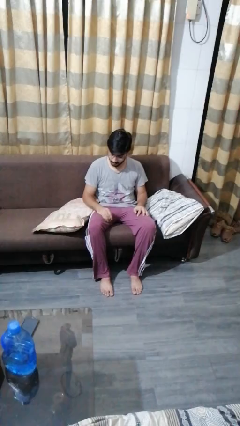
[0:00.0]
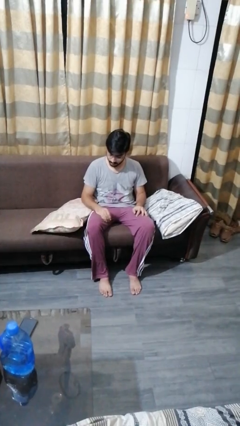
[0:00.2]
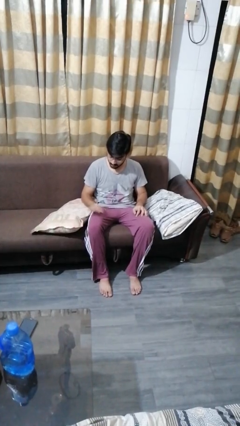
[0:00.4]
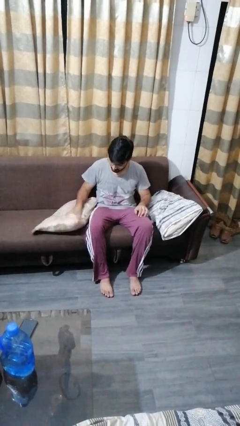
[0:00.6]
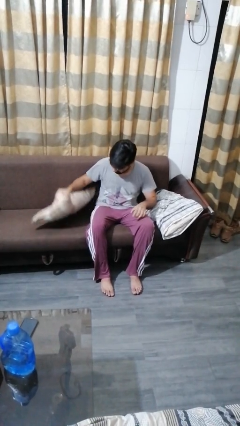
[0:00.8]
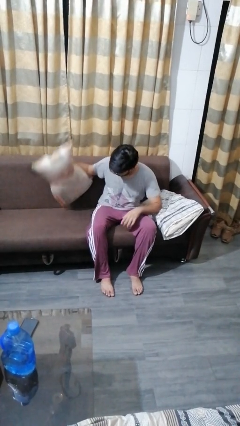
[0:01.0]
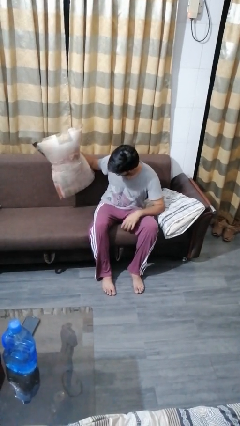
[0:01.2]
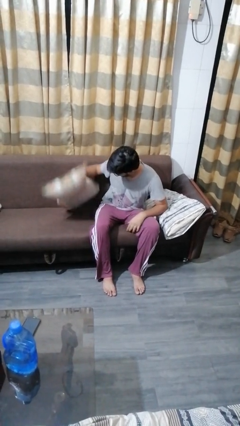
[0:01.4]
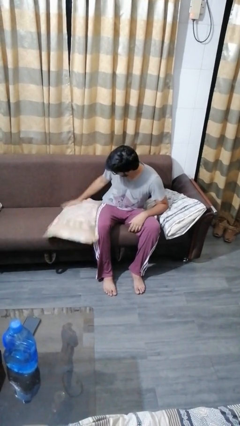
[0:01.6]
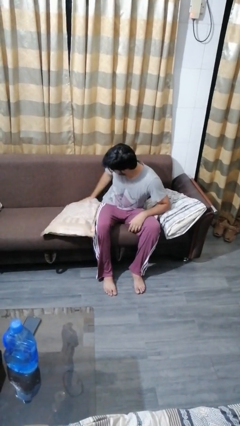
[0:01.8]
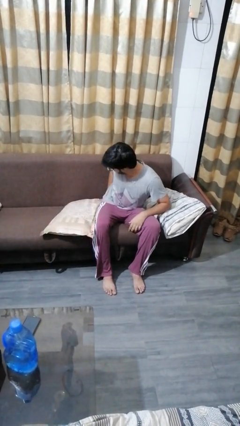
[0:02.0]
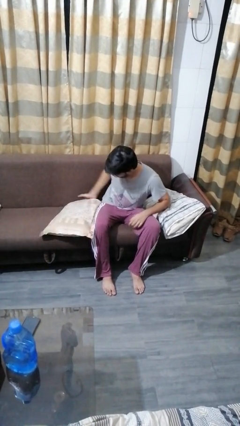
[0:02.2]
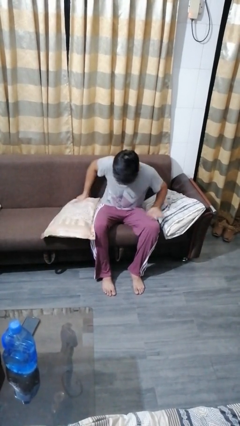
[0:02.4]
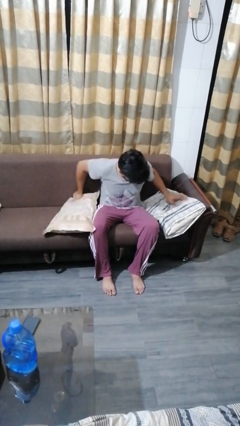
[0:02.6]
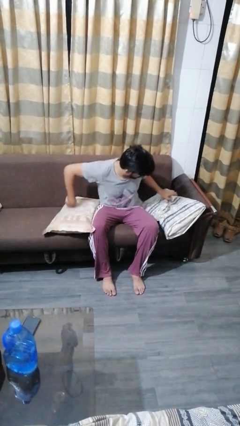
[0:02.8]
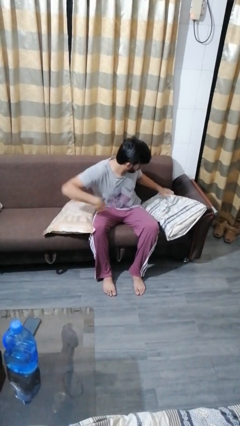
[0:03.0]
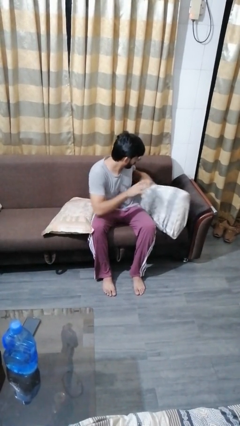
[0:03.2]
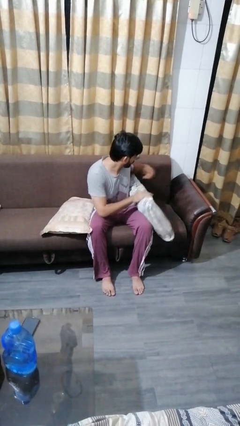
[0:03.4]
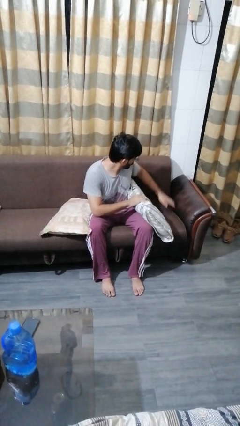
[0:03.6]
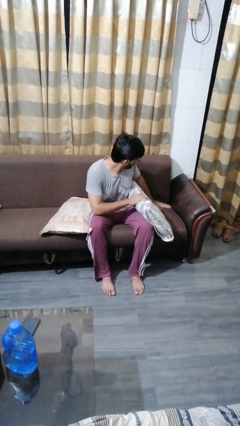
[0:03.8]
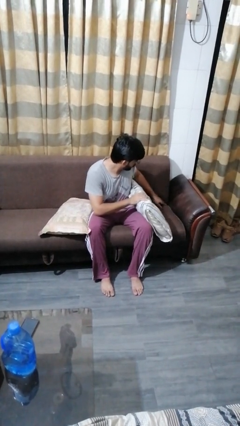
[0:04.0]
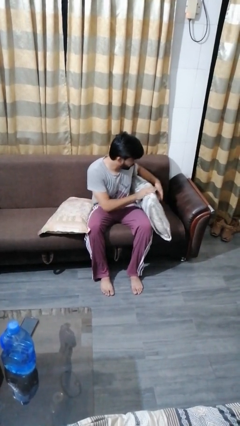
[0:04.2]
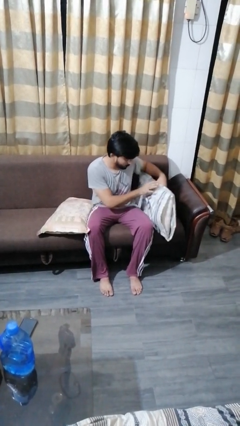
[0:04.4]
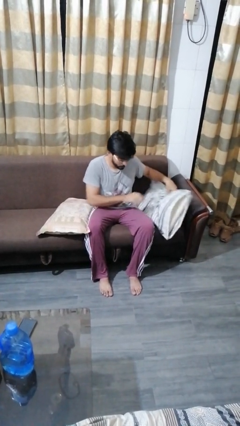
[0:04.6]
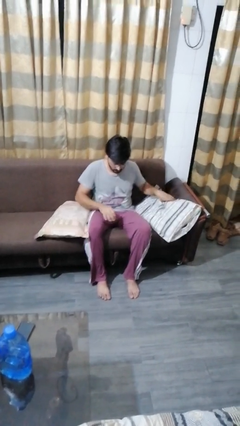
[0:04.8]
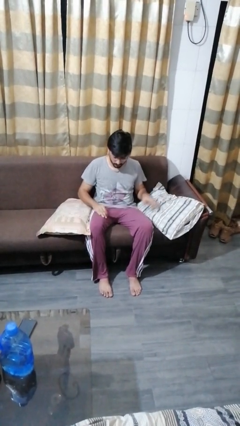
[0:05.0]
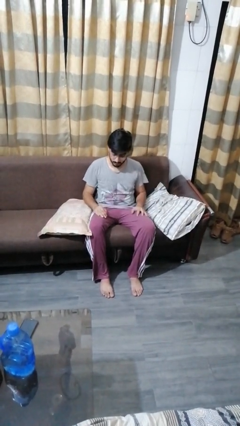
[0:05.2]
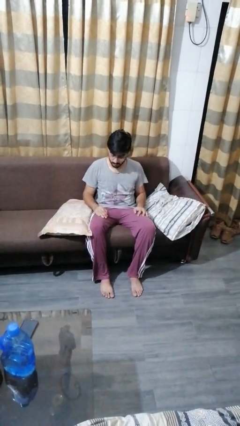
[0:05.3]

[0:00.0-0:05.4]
person searches in couch

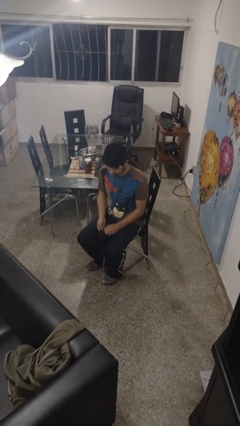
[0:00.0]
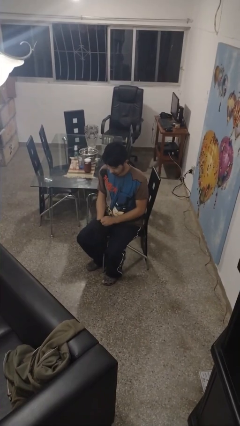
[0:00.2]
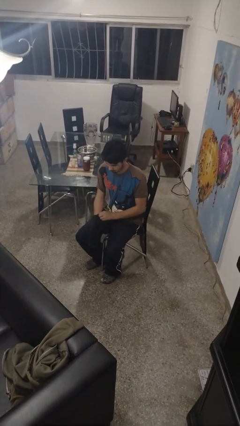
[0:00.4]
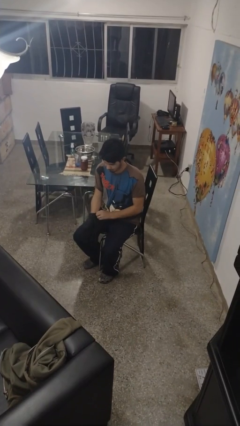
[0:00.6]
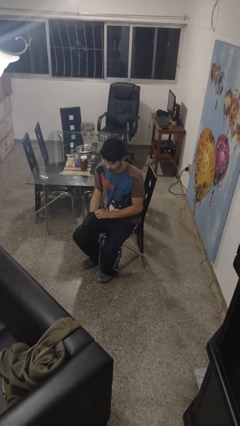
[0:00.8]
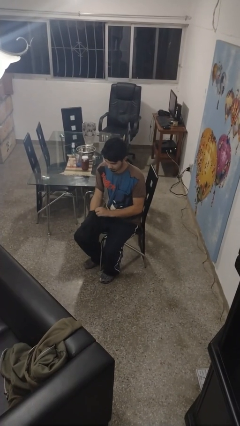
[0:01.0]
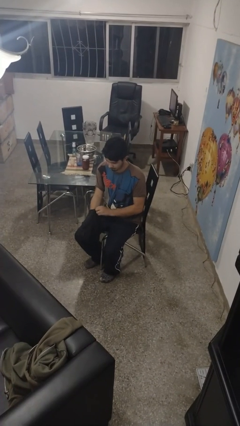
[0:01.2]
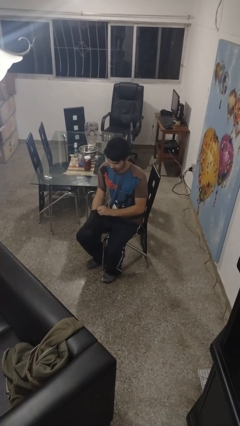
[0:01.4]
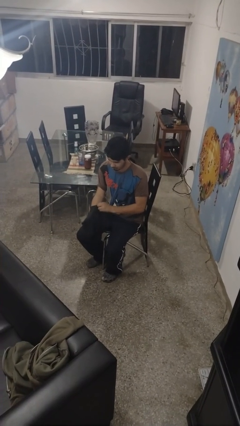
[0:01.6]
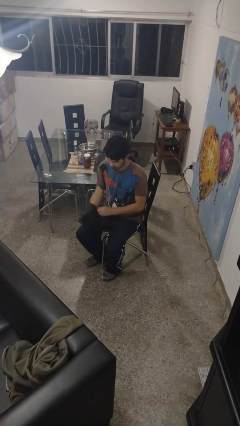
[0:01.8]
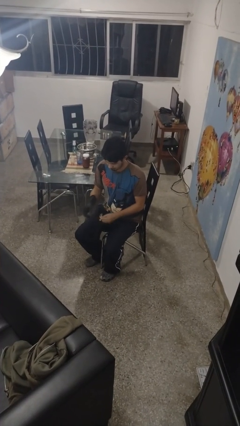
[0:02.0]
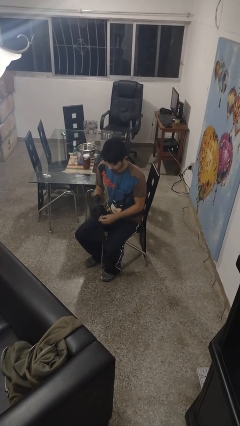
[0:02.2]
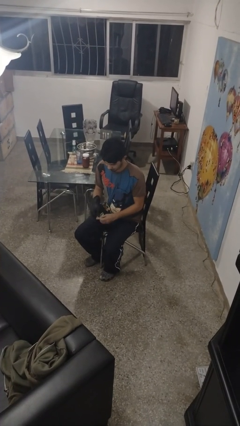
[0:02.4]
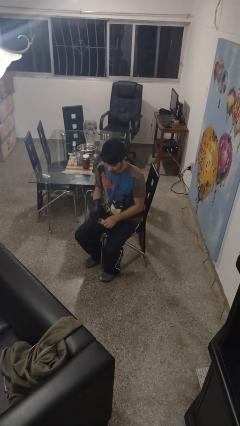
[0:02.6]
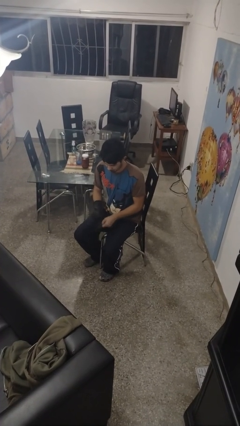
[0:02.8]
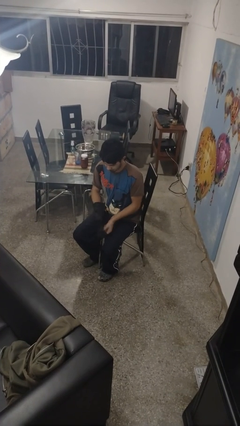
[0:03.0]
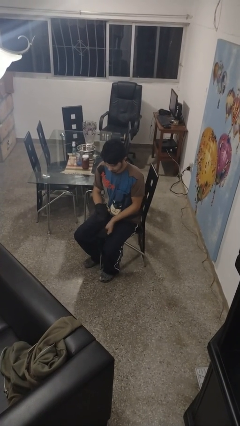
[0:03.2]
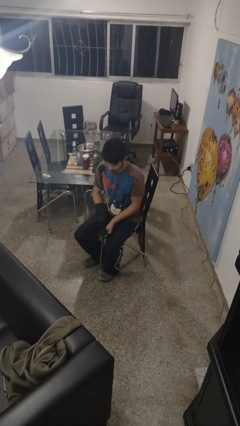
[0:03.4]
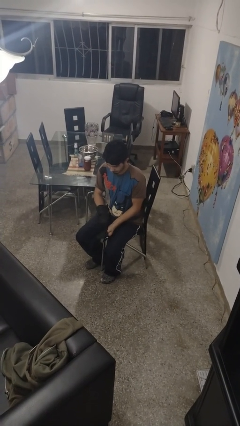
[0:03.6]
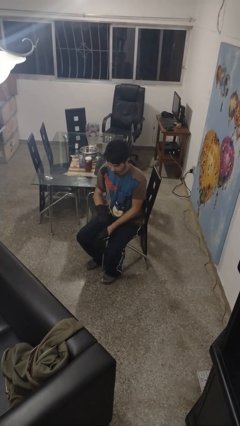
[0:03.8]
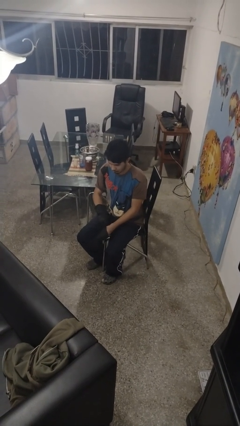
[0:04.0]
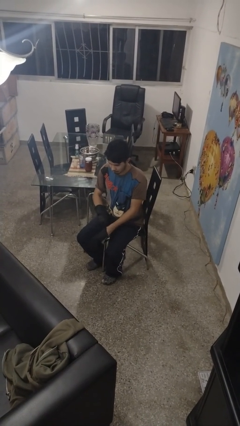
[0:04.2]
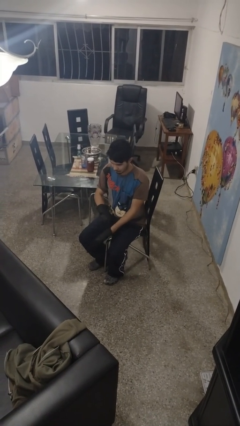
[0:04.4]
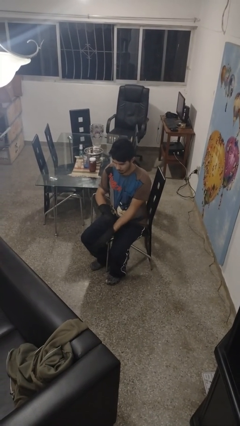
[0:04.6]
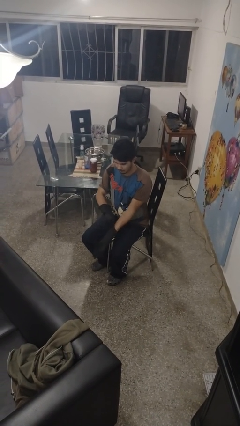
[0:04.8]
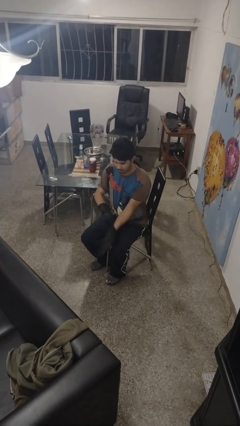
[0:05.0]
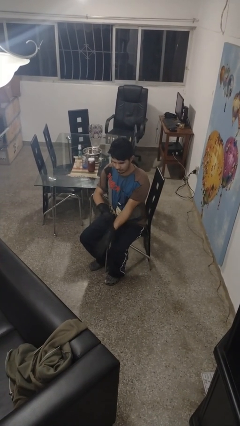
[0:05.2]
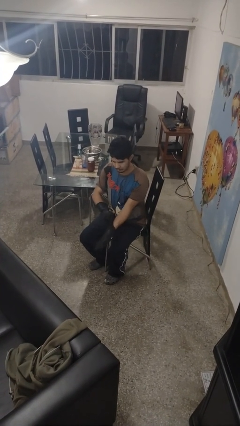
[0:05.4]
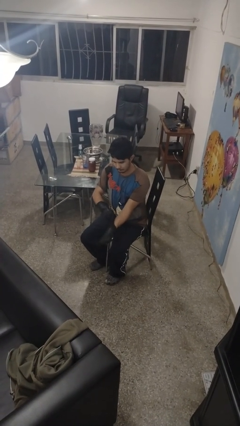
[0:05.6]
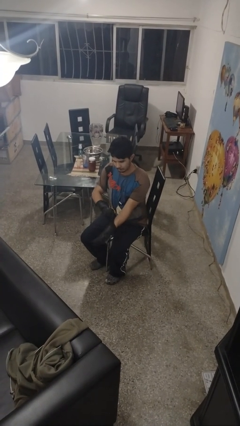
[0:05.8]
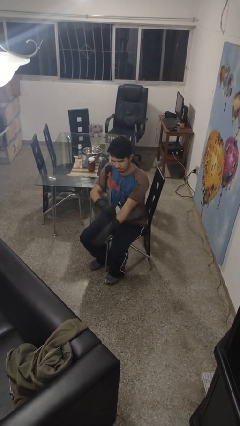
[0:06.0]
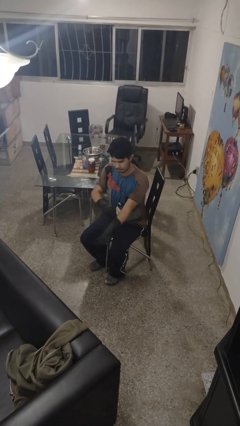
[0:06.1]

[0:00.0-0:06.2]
person puts on gloves

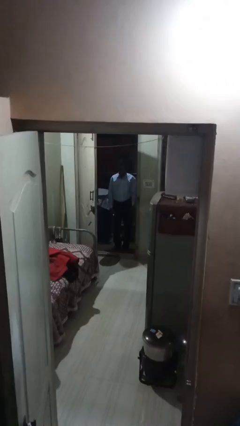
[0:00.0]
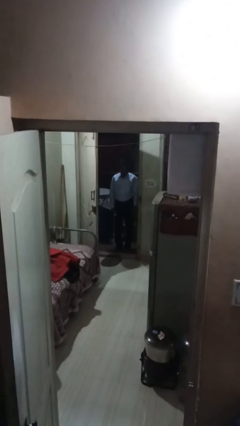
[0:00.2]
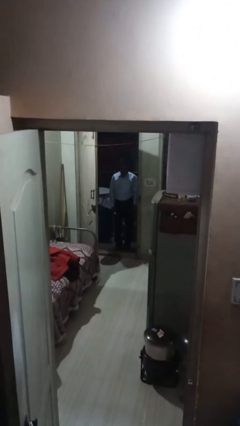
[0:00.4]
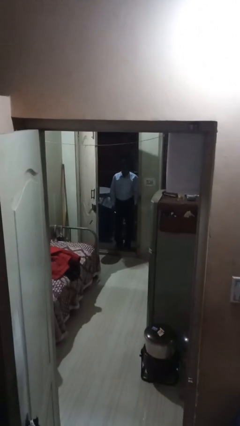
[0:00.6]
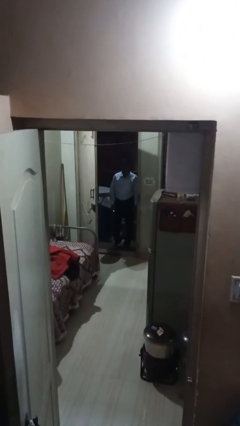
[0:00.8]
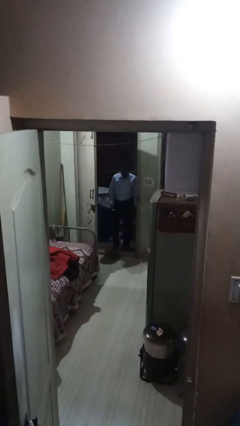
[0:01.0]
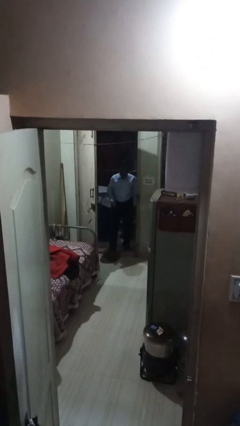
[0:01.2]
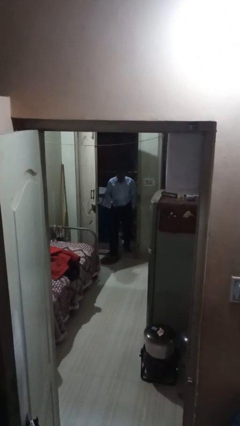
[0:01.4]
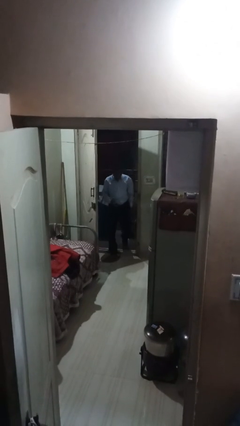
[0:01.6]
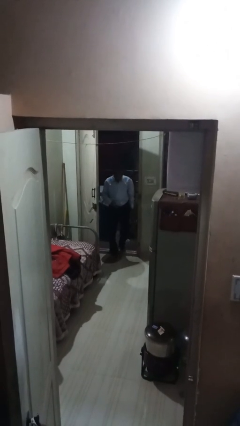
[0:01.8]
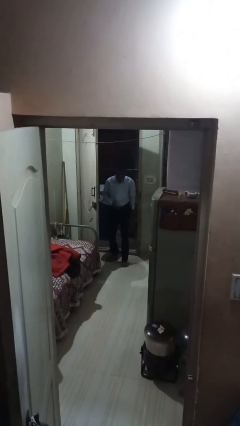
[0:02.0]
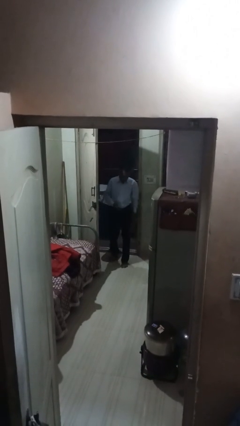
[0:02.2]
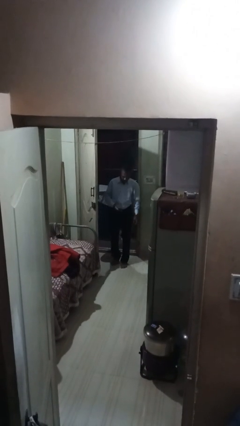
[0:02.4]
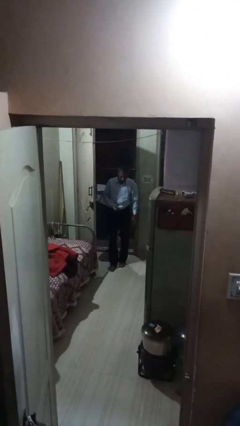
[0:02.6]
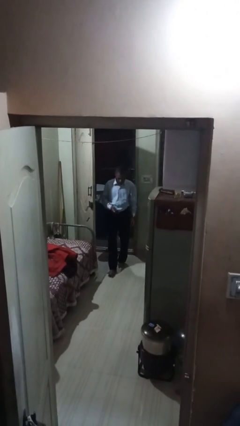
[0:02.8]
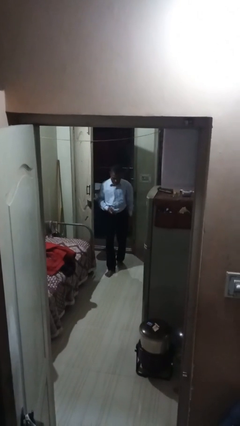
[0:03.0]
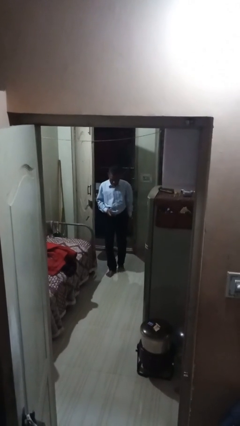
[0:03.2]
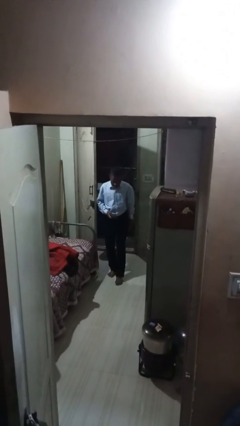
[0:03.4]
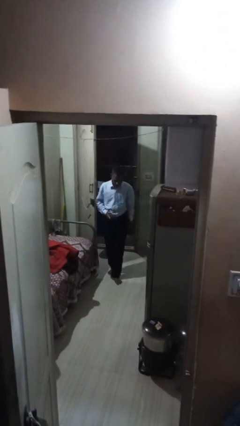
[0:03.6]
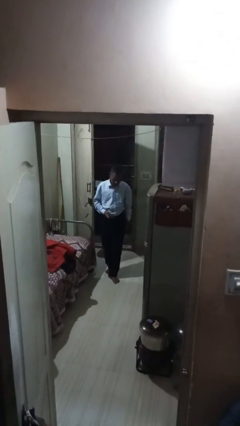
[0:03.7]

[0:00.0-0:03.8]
person enters scene through structure

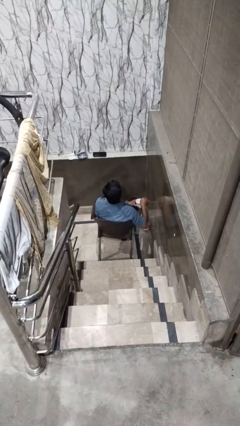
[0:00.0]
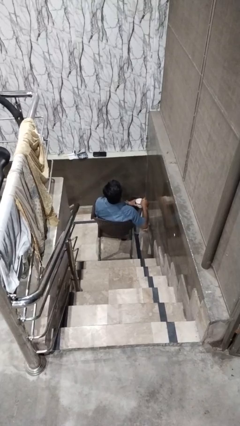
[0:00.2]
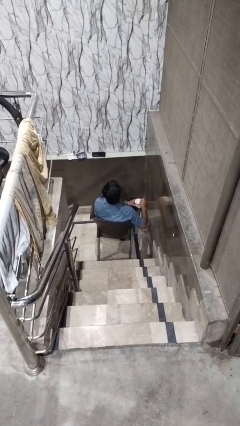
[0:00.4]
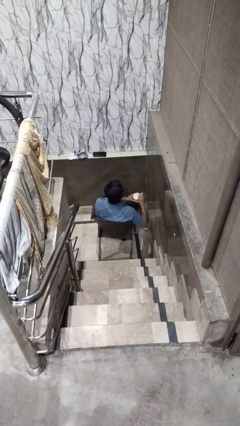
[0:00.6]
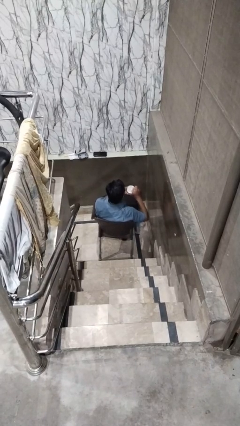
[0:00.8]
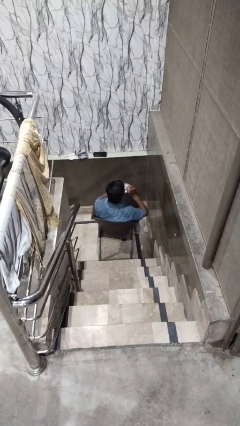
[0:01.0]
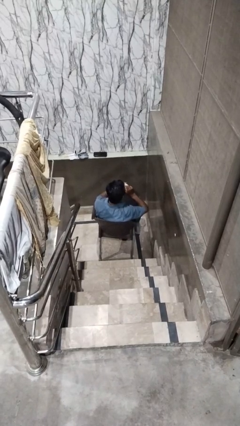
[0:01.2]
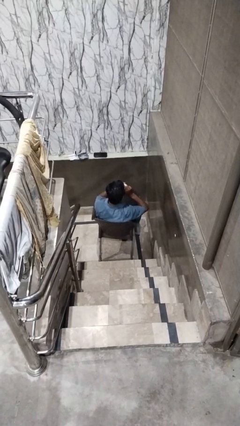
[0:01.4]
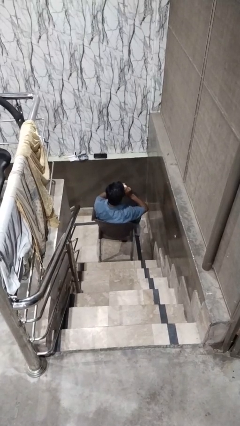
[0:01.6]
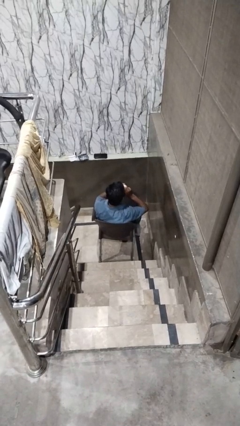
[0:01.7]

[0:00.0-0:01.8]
person drinks from mug

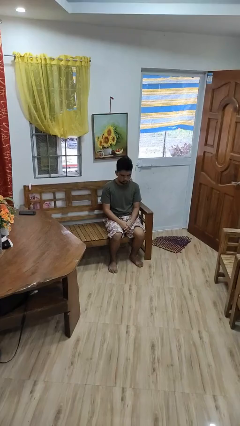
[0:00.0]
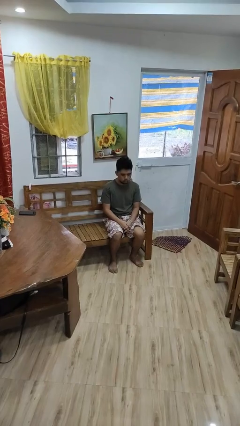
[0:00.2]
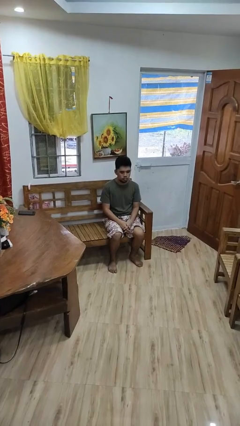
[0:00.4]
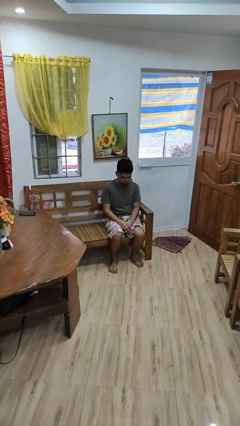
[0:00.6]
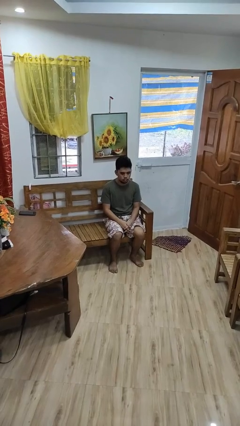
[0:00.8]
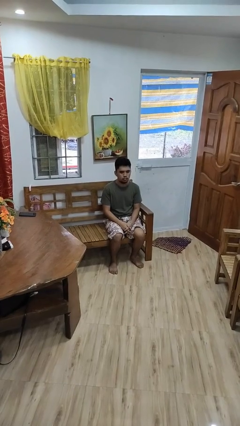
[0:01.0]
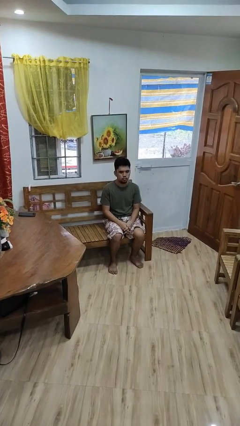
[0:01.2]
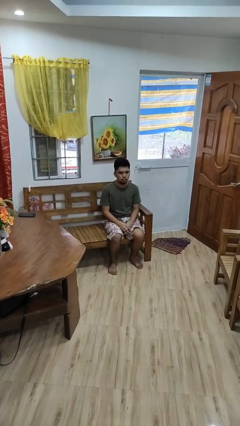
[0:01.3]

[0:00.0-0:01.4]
person nods head
